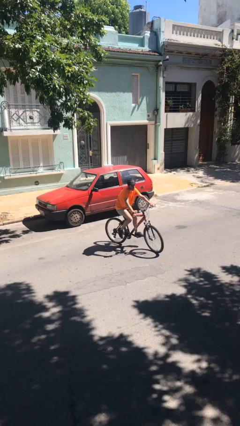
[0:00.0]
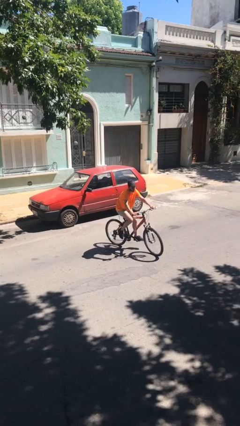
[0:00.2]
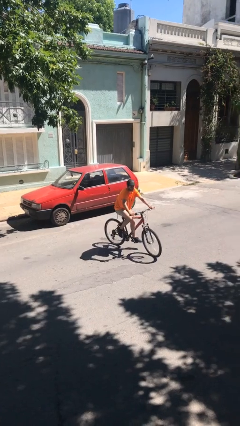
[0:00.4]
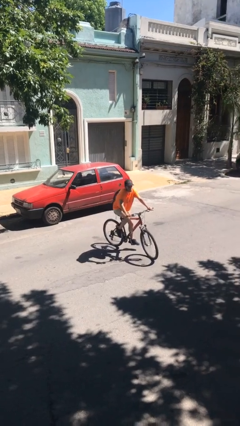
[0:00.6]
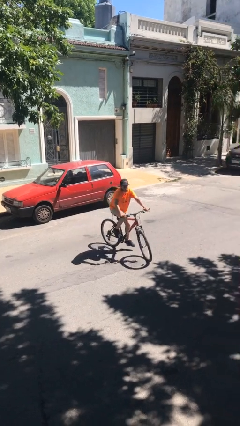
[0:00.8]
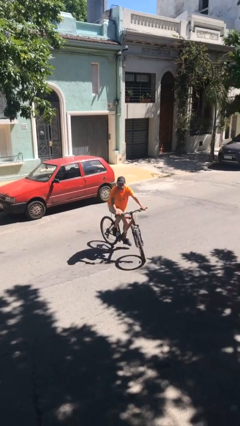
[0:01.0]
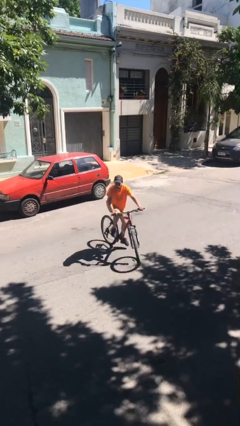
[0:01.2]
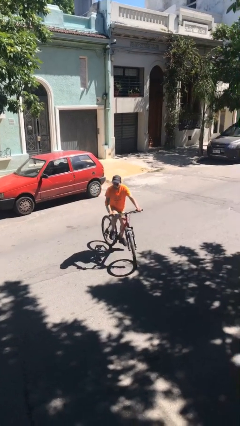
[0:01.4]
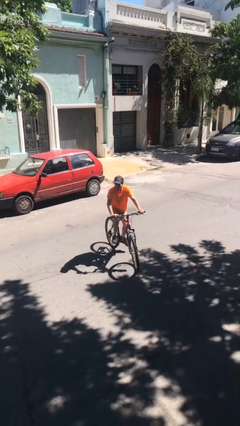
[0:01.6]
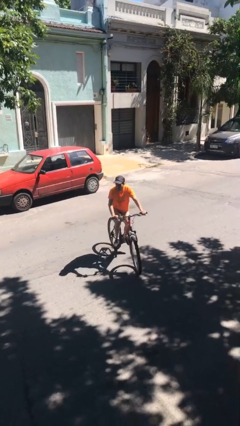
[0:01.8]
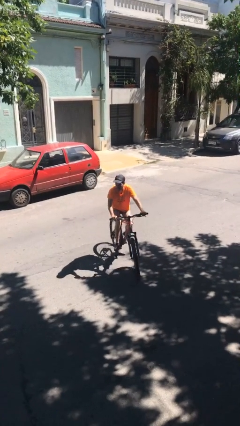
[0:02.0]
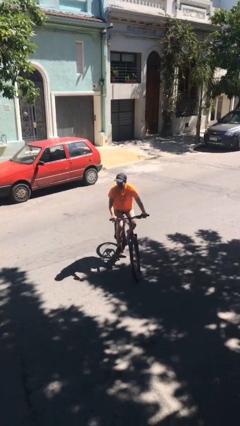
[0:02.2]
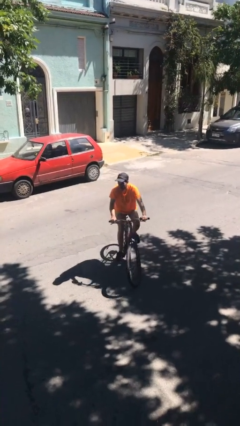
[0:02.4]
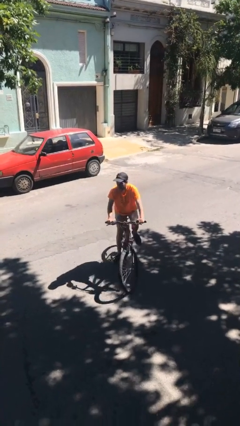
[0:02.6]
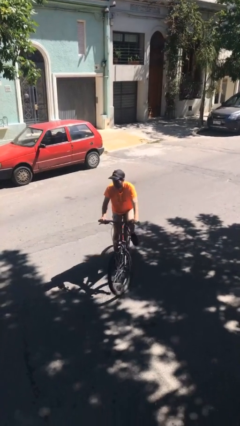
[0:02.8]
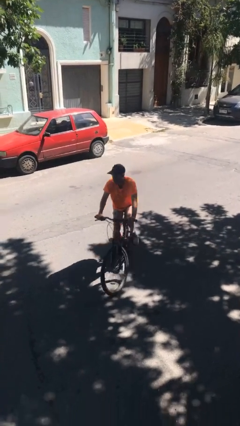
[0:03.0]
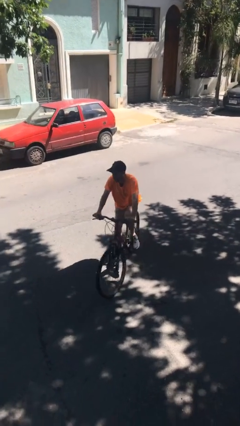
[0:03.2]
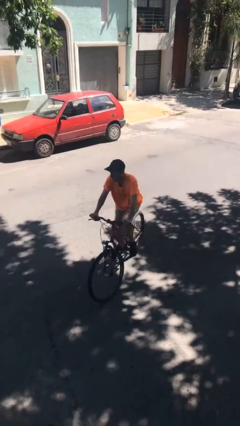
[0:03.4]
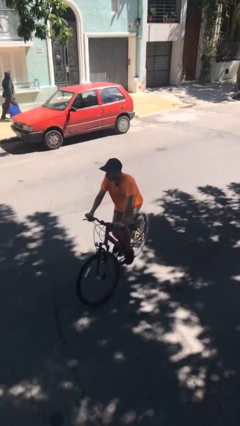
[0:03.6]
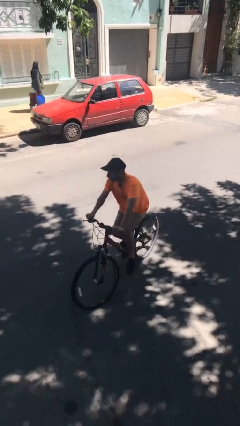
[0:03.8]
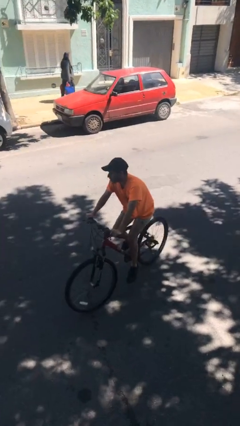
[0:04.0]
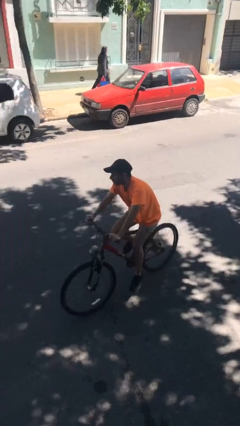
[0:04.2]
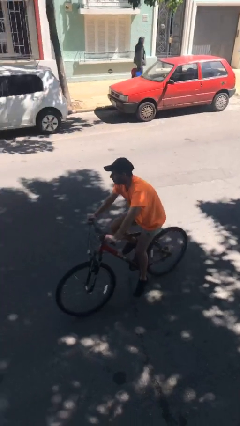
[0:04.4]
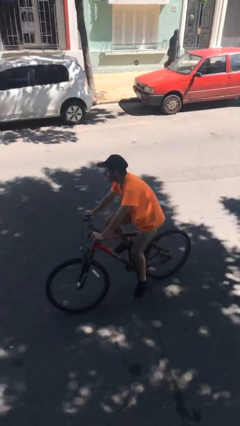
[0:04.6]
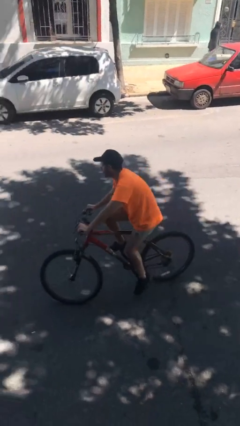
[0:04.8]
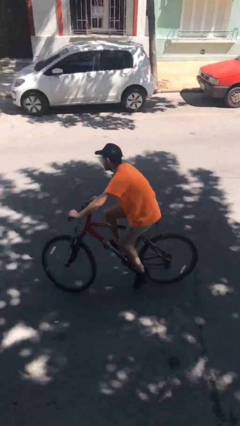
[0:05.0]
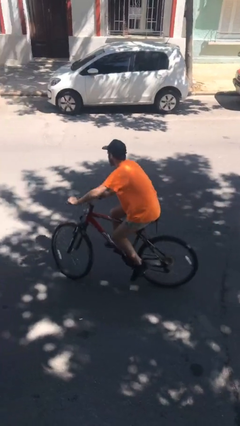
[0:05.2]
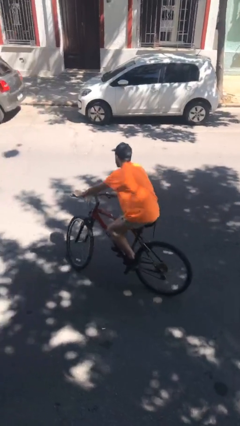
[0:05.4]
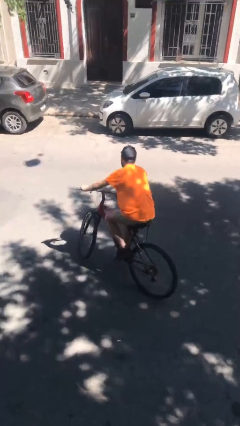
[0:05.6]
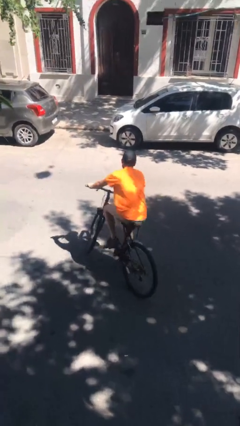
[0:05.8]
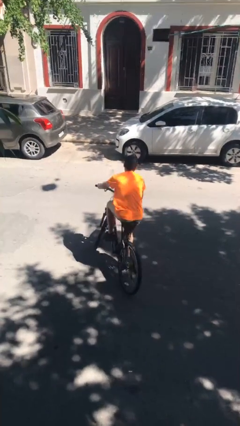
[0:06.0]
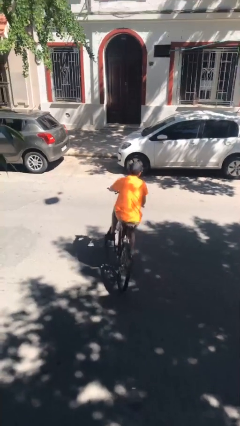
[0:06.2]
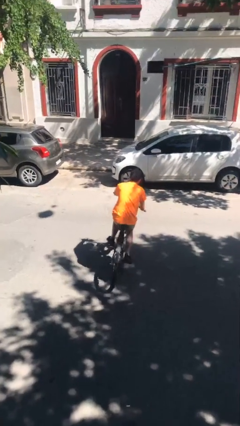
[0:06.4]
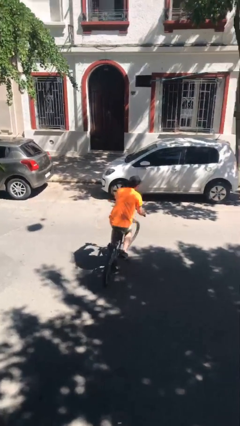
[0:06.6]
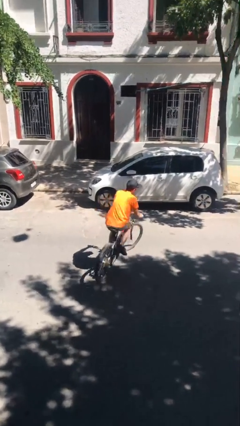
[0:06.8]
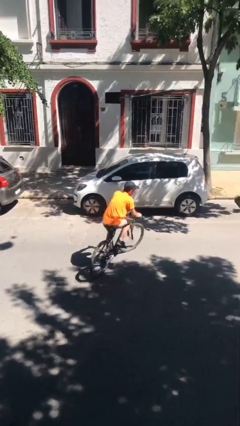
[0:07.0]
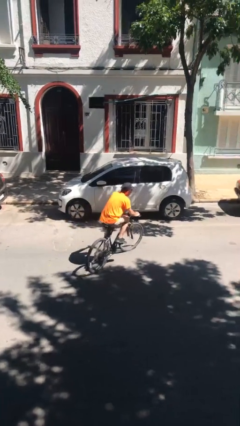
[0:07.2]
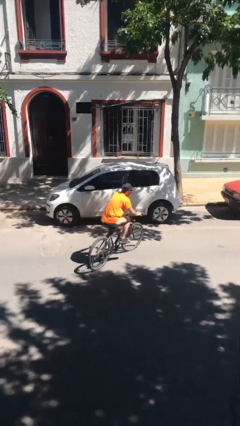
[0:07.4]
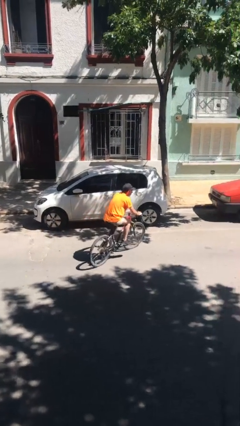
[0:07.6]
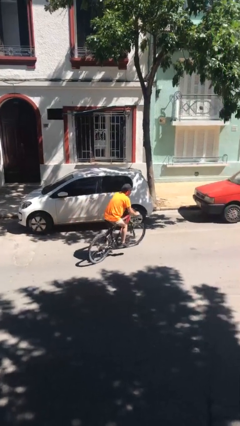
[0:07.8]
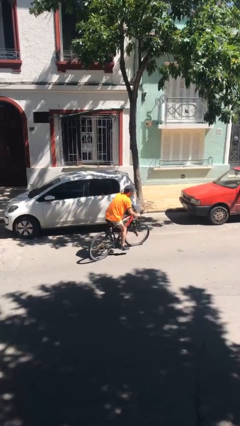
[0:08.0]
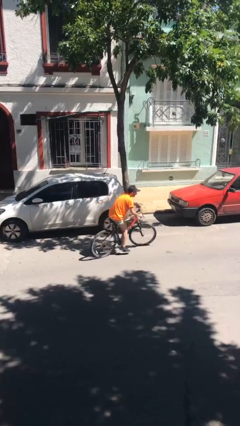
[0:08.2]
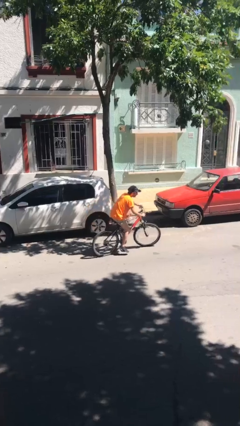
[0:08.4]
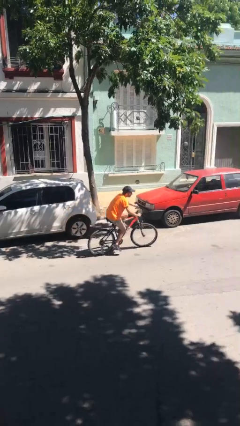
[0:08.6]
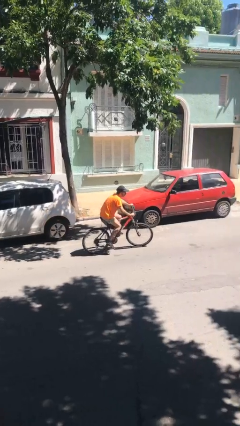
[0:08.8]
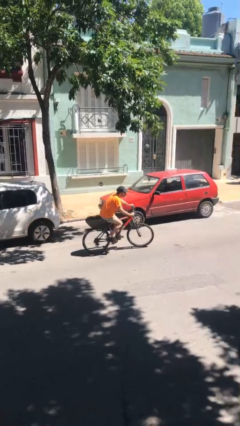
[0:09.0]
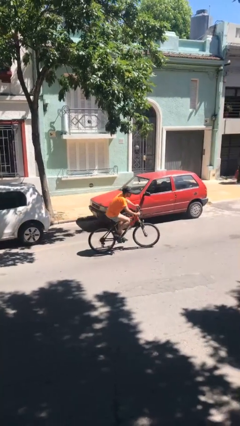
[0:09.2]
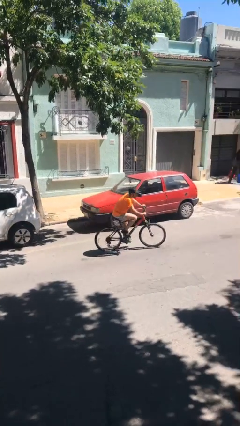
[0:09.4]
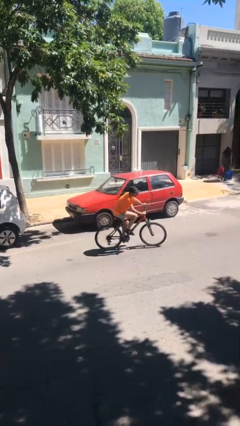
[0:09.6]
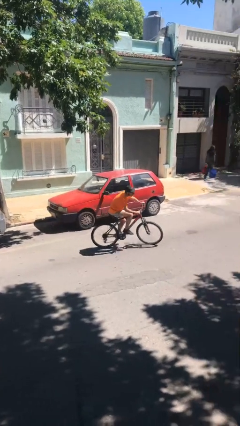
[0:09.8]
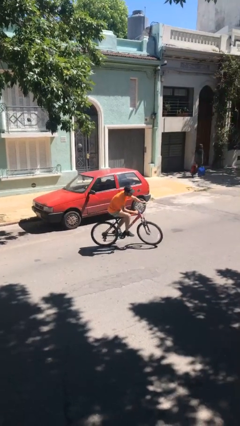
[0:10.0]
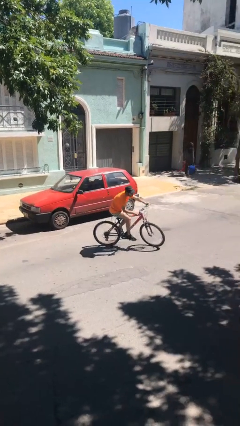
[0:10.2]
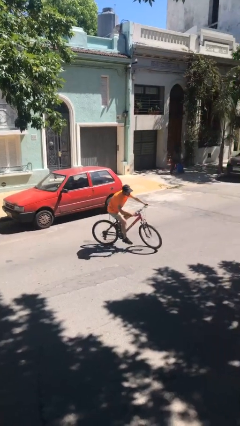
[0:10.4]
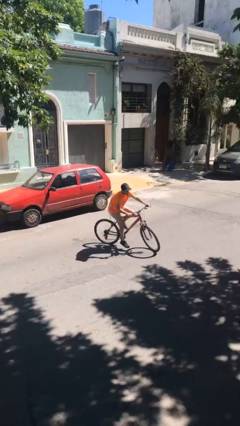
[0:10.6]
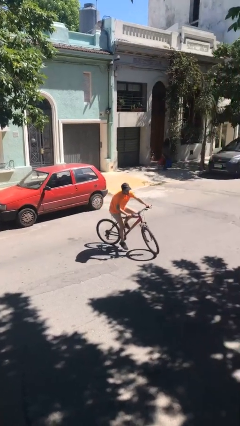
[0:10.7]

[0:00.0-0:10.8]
person rides bicycle

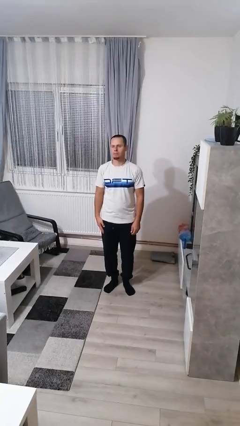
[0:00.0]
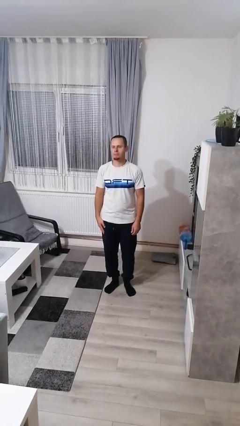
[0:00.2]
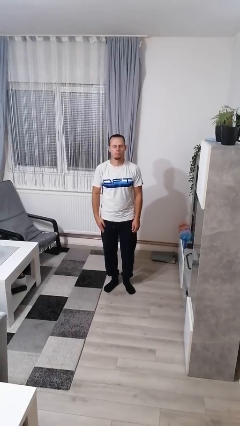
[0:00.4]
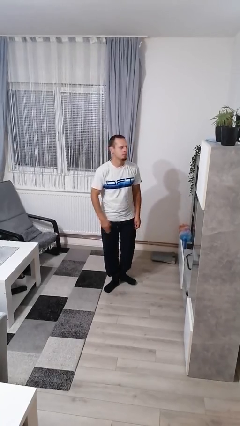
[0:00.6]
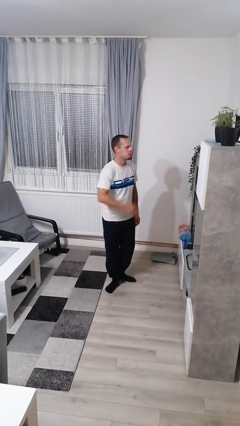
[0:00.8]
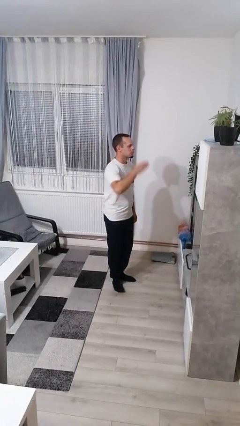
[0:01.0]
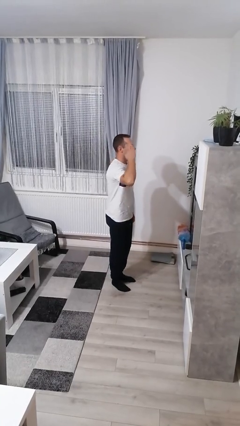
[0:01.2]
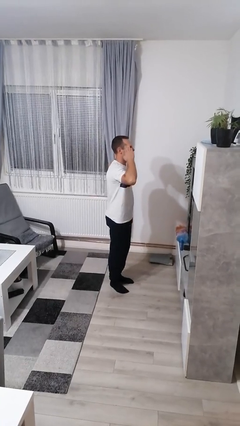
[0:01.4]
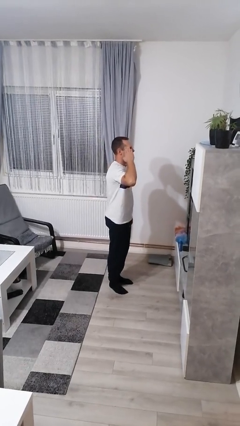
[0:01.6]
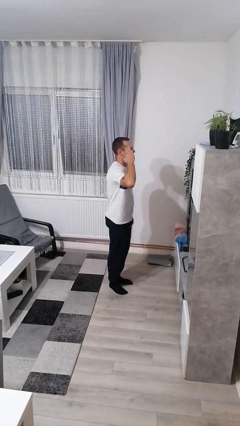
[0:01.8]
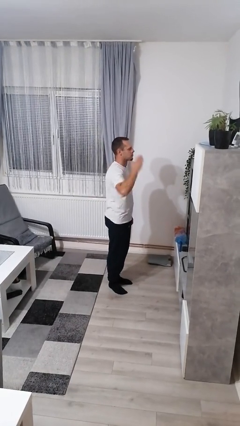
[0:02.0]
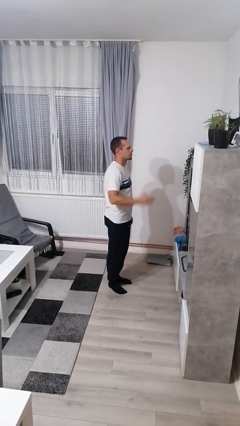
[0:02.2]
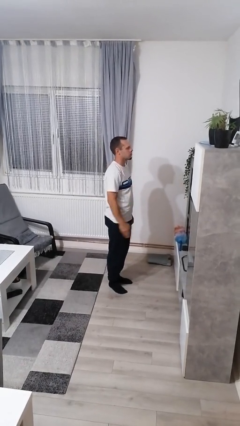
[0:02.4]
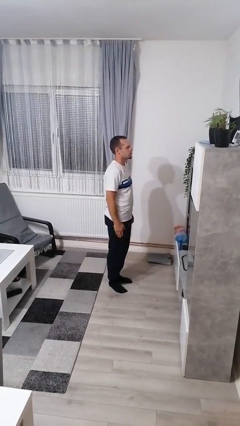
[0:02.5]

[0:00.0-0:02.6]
person salutes

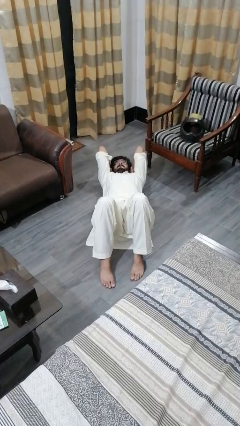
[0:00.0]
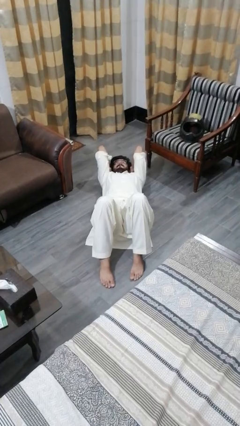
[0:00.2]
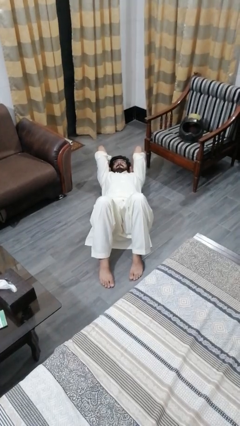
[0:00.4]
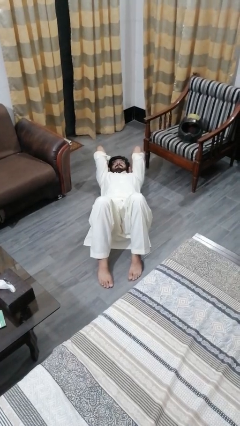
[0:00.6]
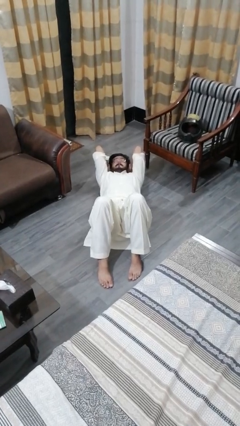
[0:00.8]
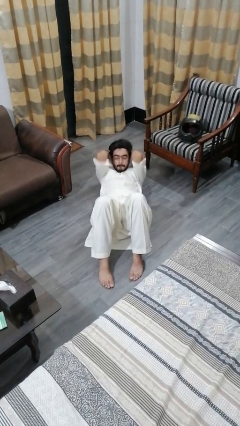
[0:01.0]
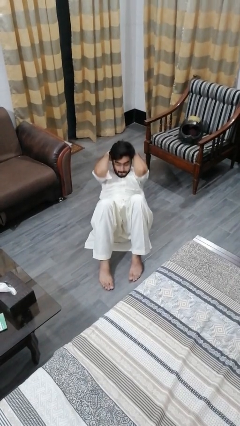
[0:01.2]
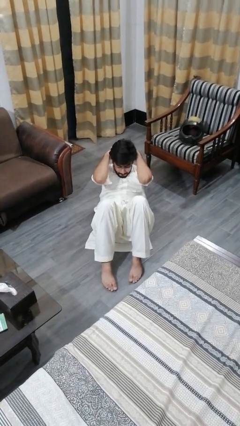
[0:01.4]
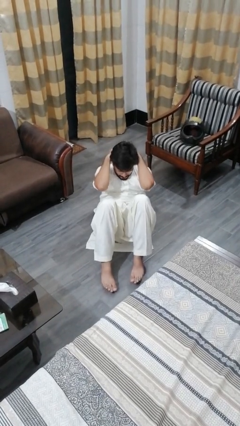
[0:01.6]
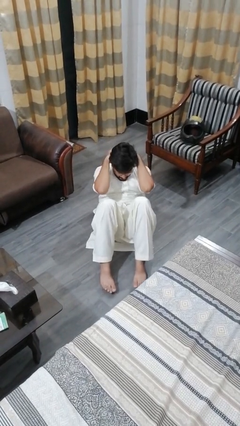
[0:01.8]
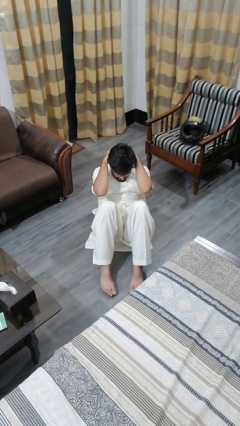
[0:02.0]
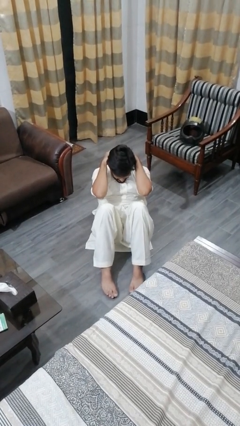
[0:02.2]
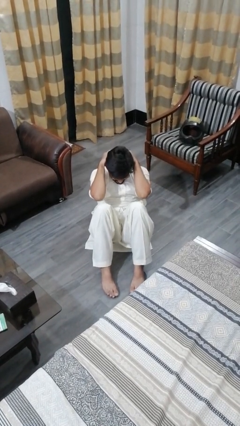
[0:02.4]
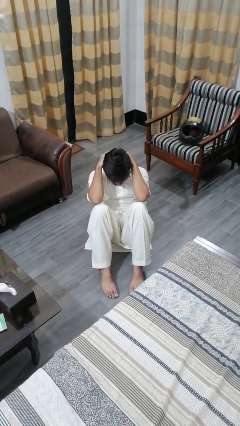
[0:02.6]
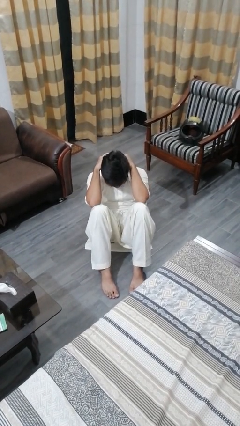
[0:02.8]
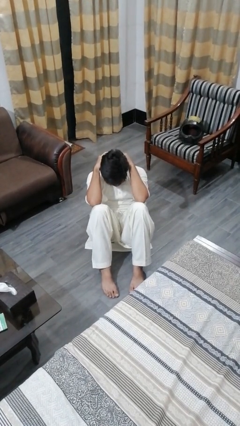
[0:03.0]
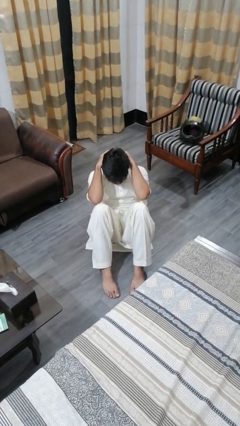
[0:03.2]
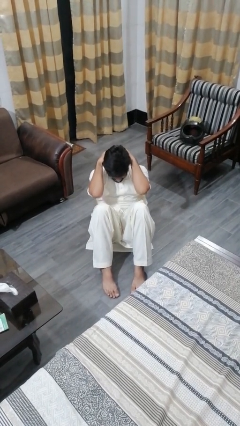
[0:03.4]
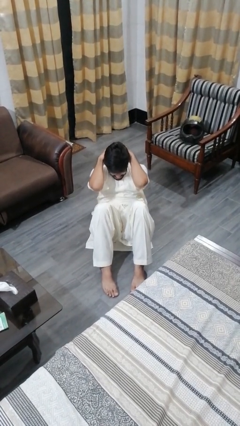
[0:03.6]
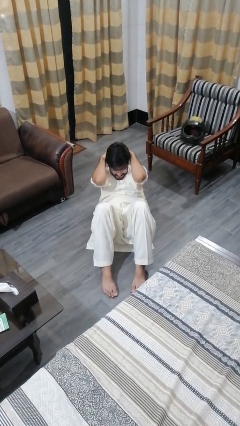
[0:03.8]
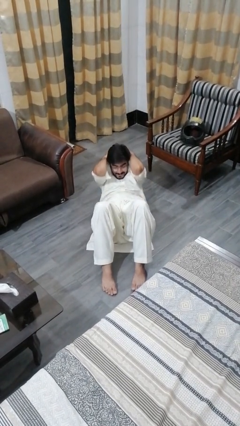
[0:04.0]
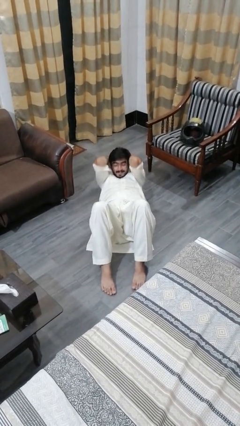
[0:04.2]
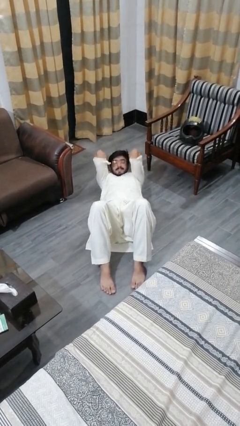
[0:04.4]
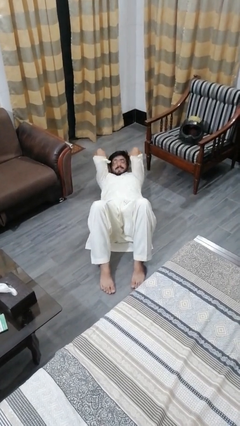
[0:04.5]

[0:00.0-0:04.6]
person exercises with situp
